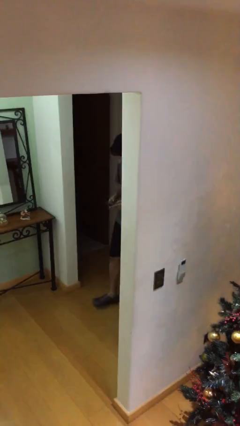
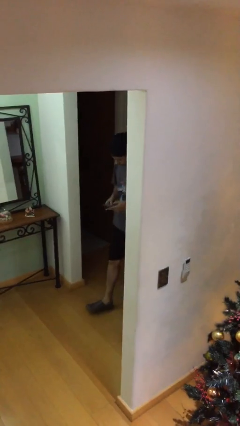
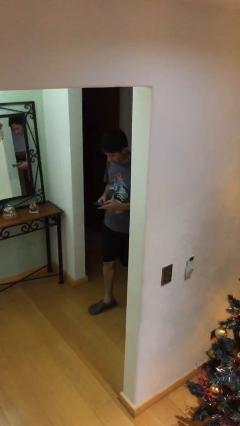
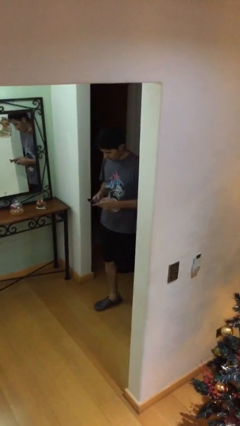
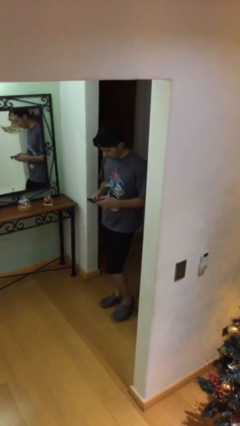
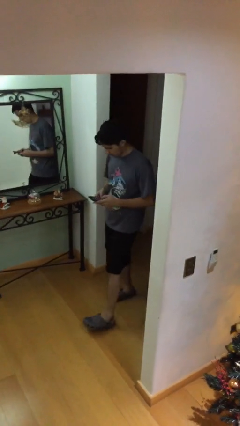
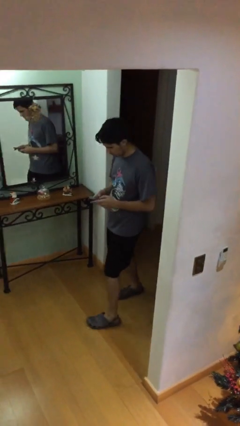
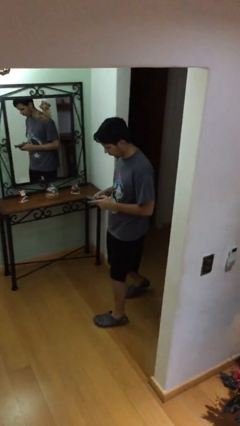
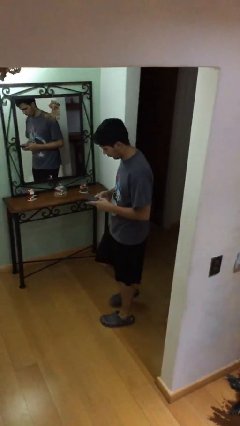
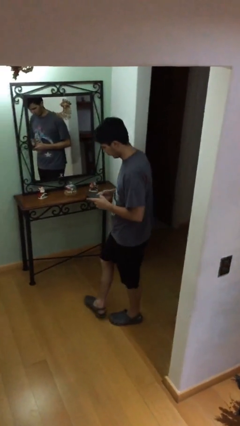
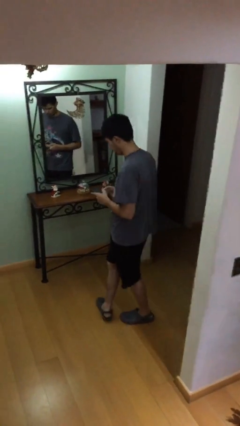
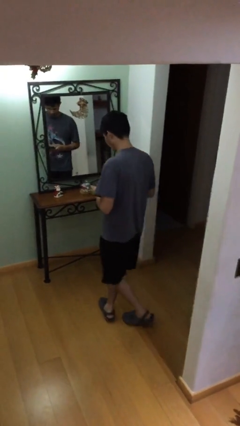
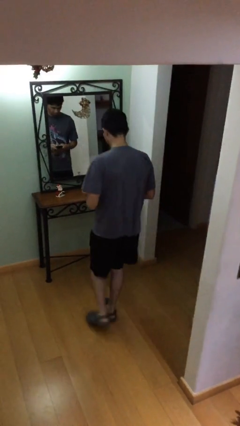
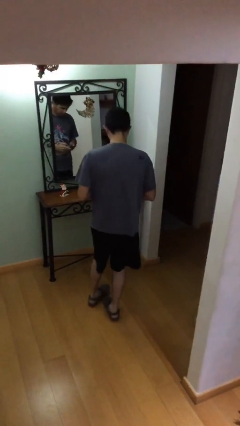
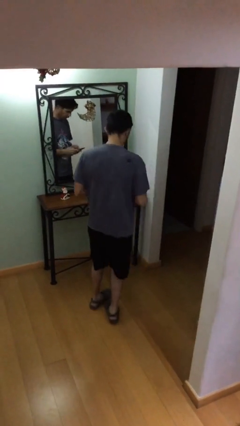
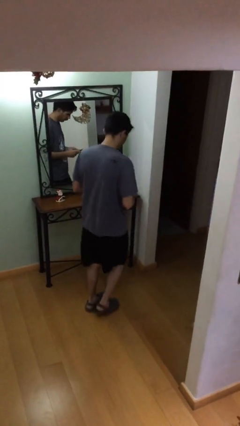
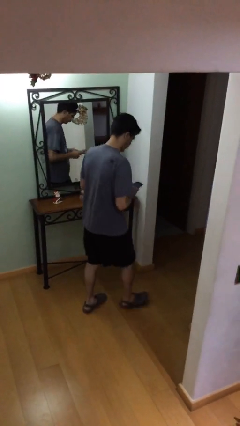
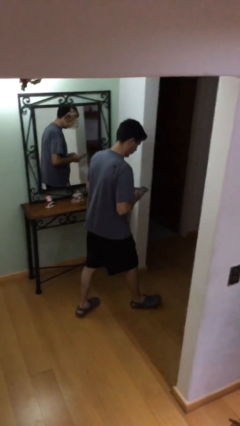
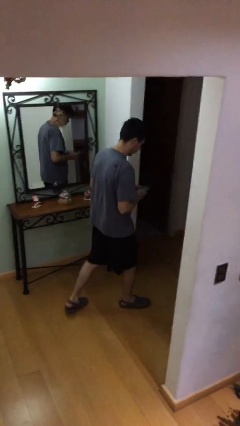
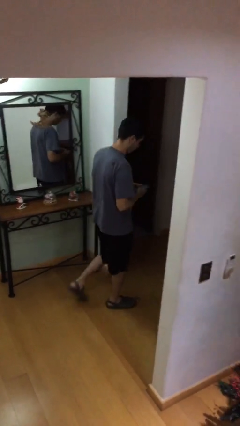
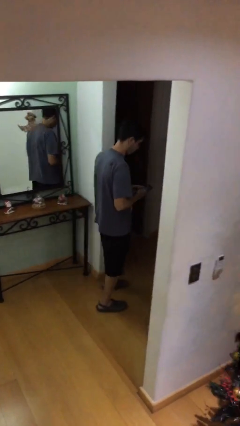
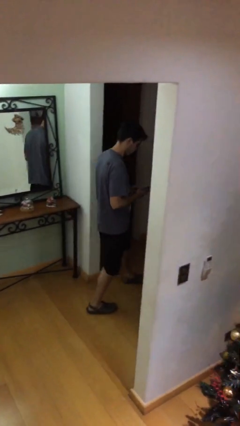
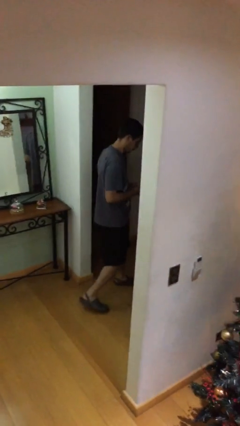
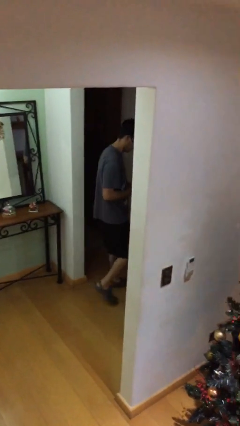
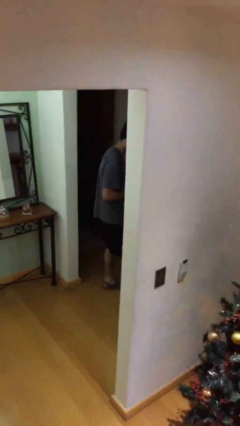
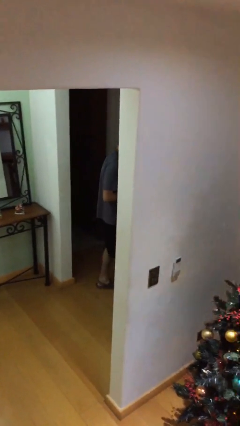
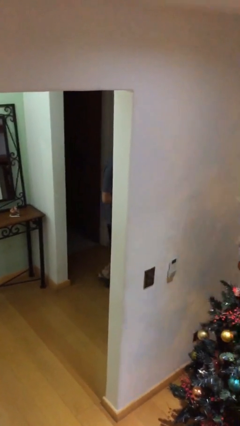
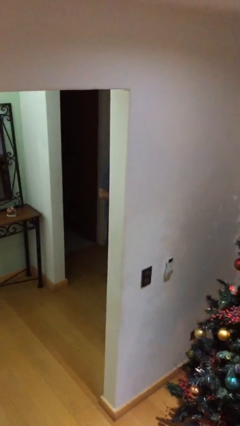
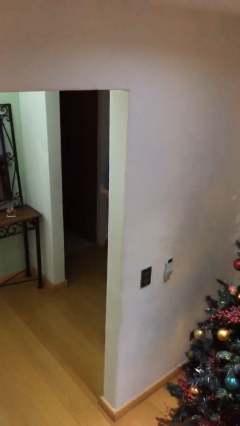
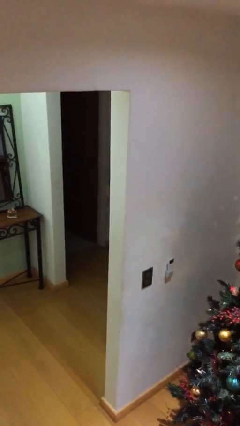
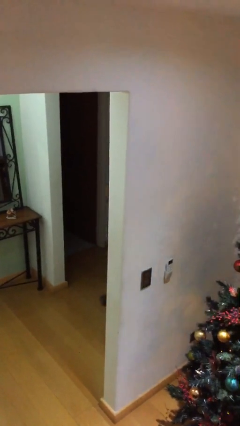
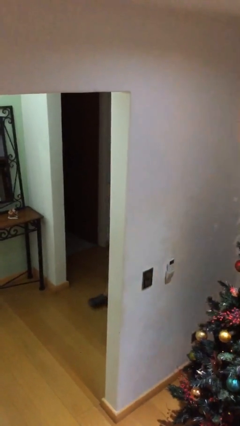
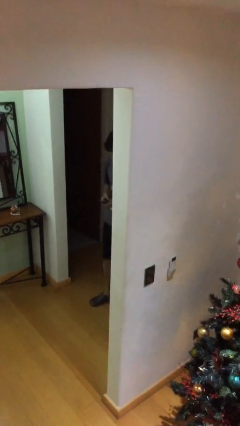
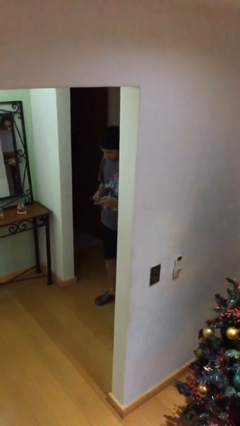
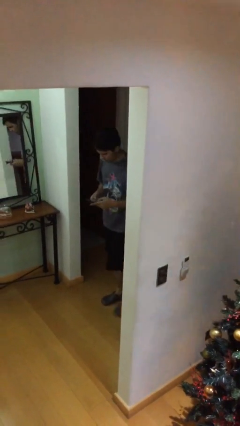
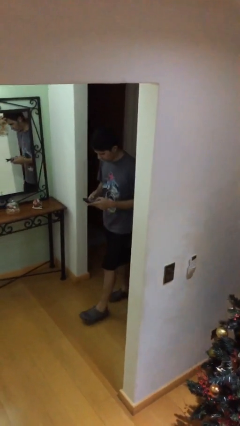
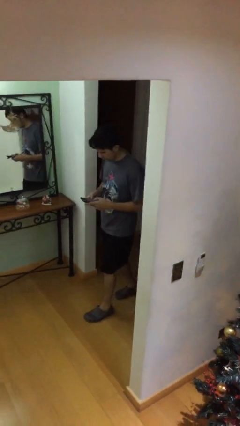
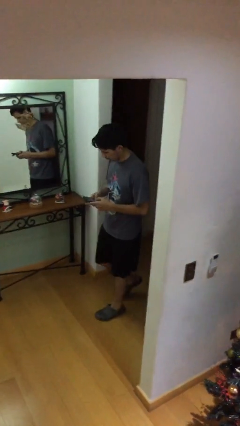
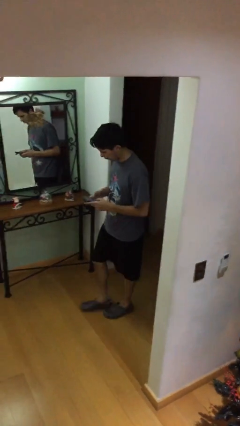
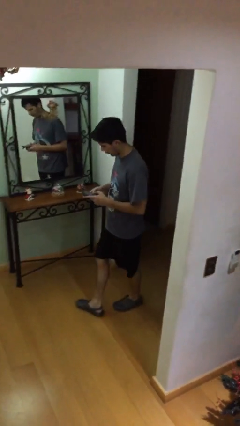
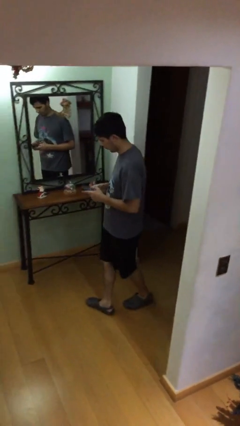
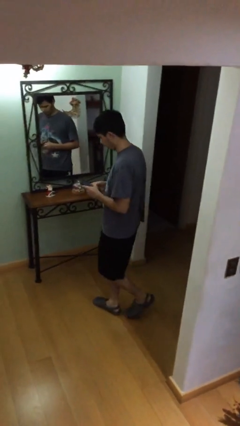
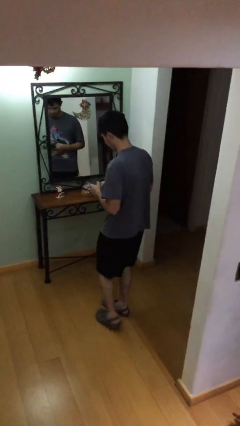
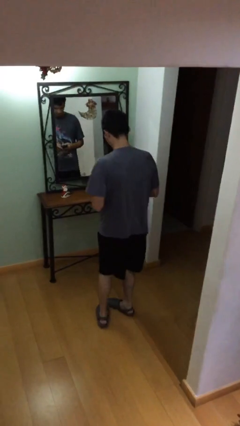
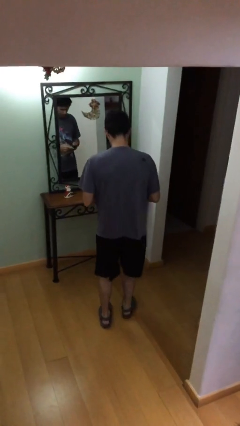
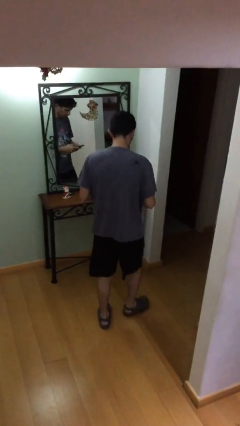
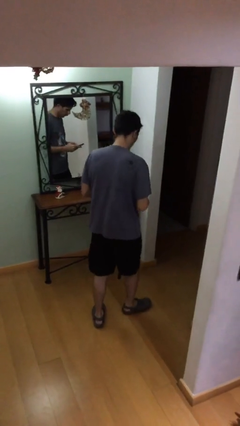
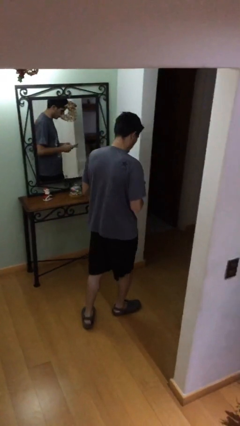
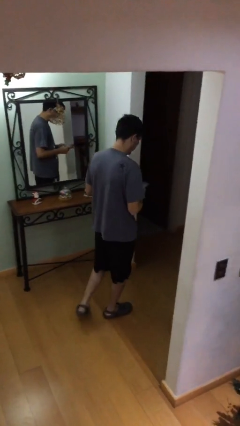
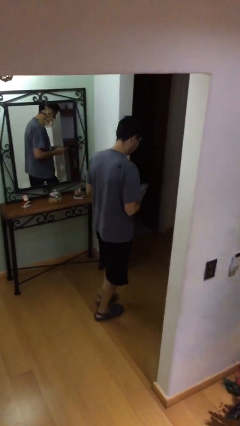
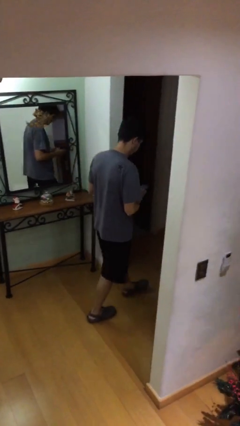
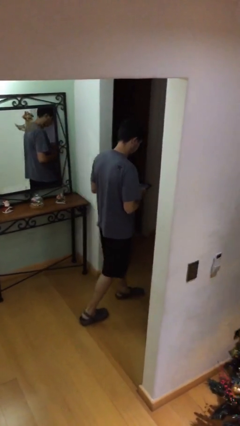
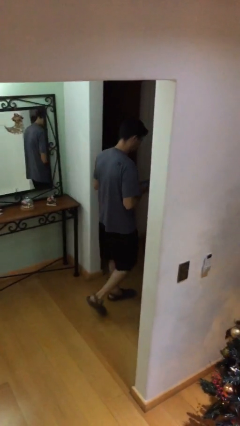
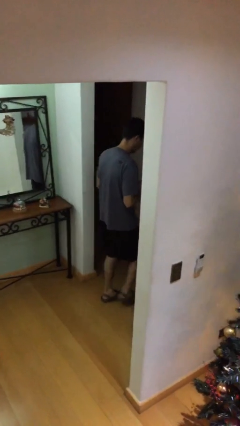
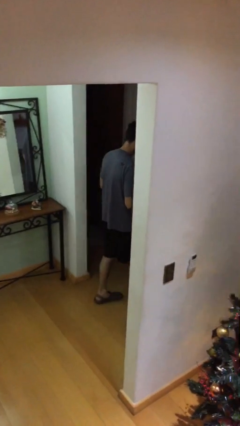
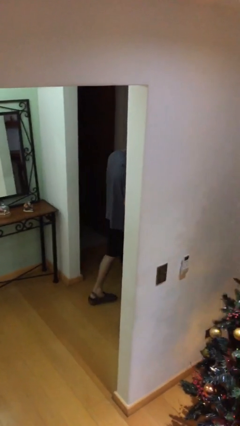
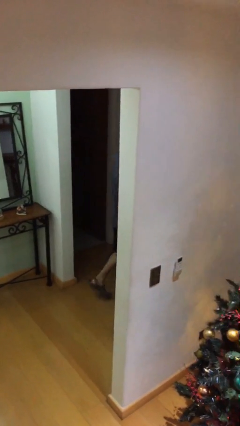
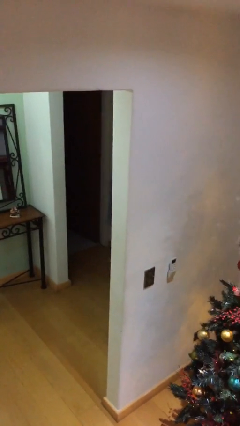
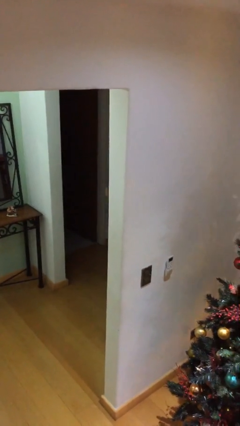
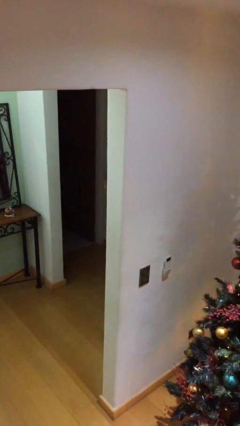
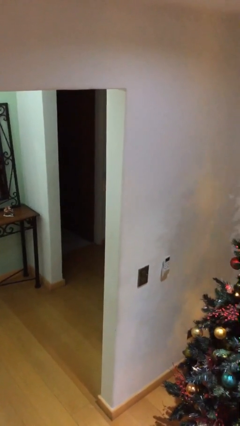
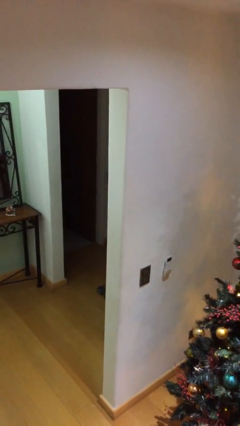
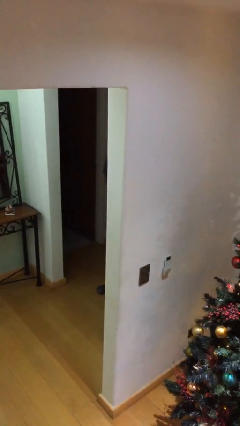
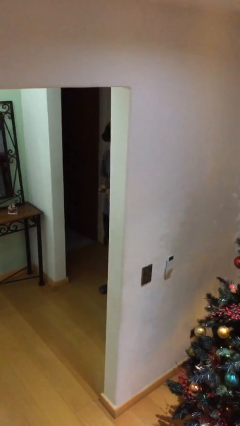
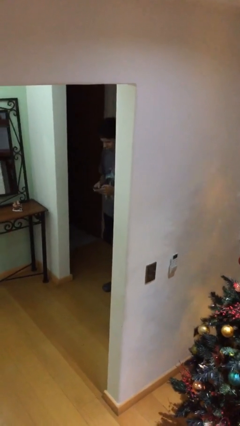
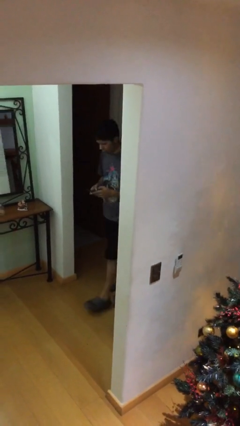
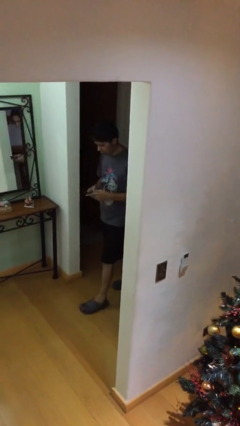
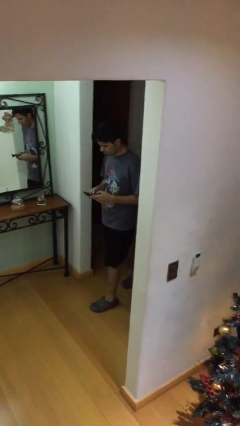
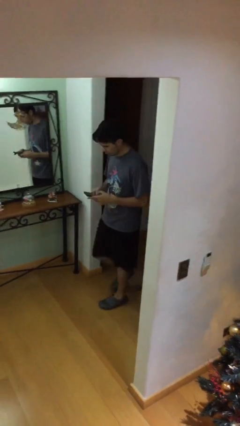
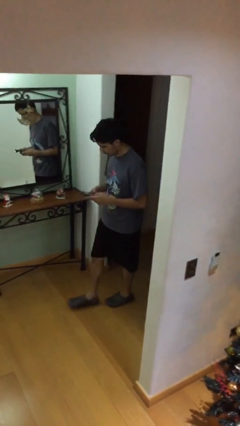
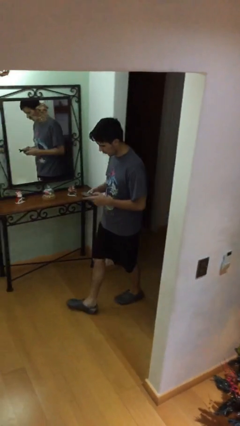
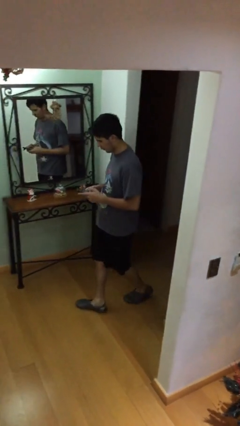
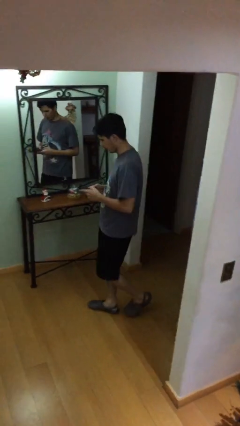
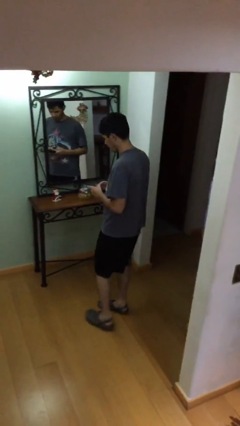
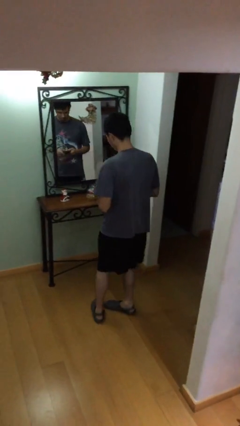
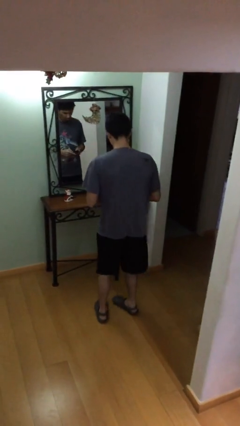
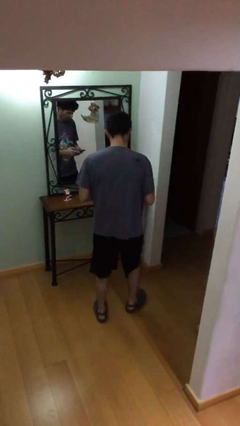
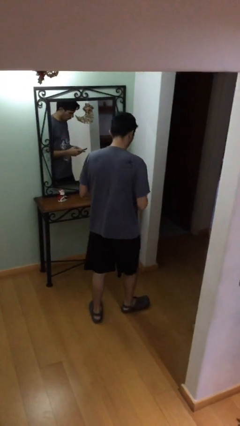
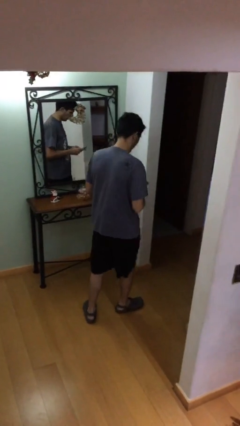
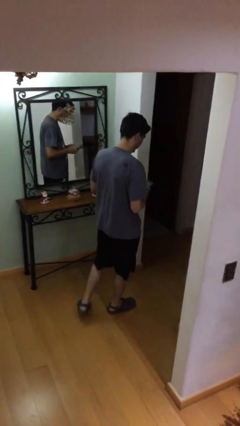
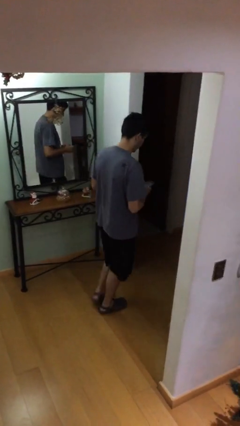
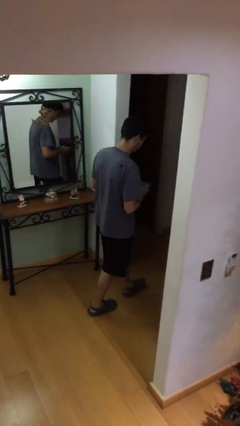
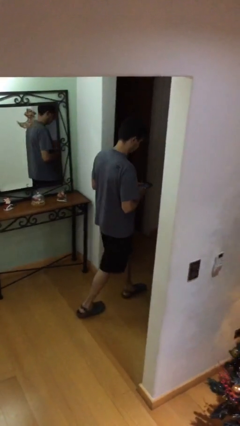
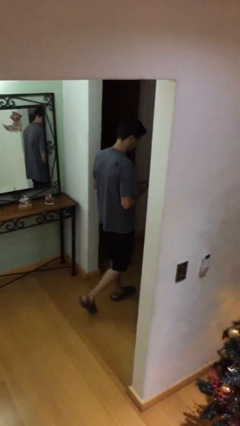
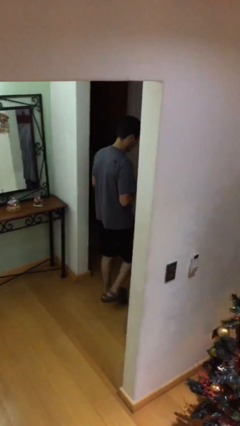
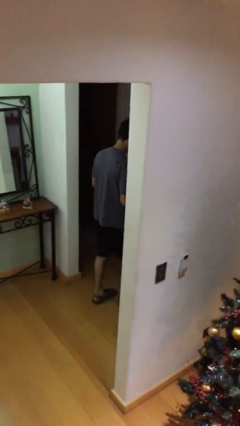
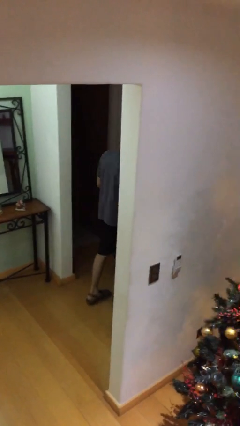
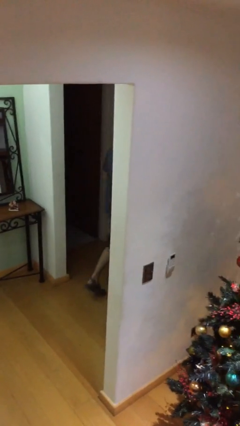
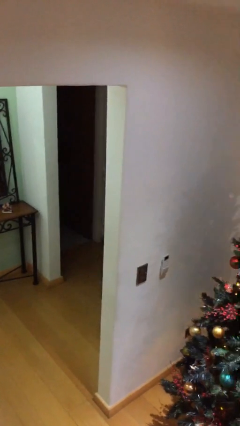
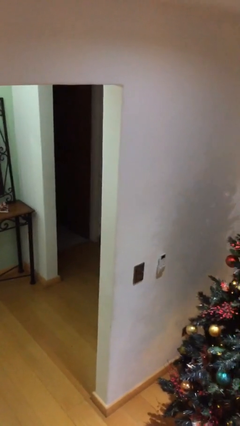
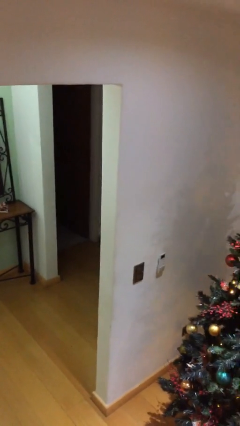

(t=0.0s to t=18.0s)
person texts on phone
